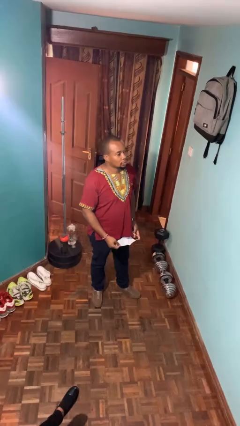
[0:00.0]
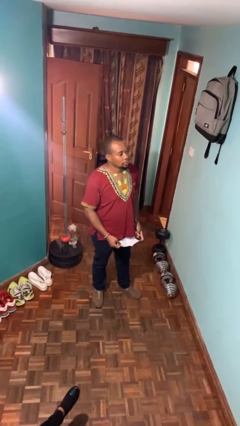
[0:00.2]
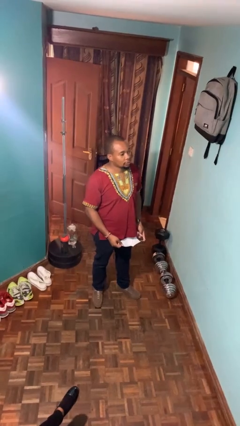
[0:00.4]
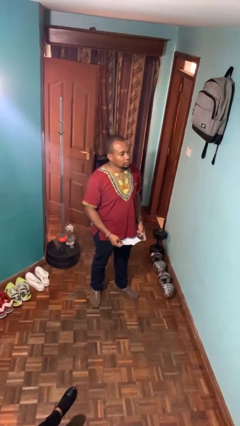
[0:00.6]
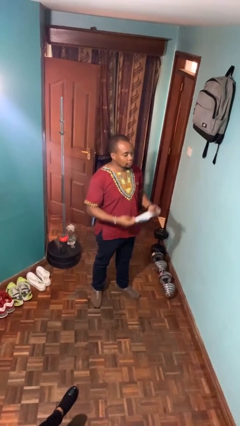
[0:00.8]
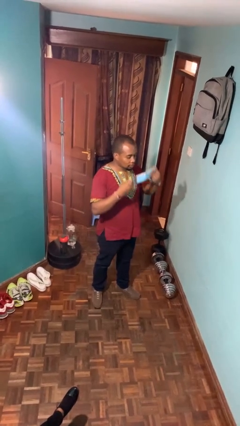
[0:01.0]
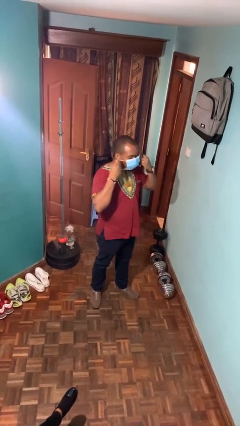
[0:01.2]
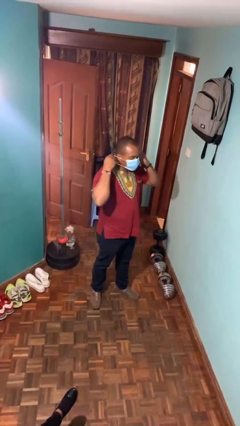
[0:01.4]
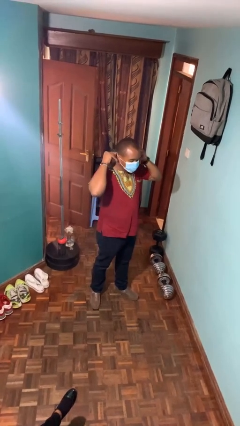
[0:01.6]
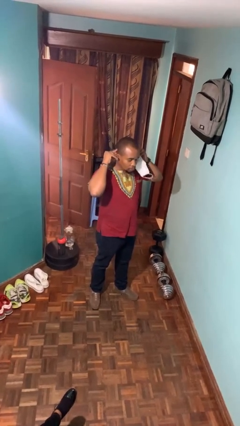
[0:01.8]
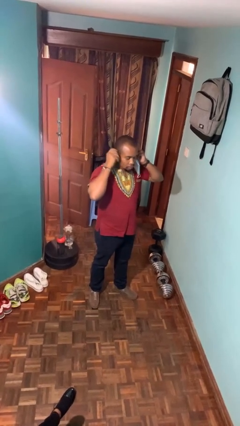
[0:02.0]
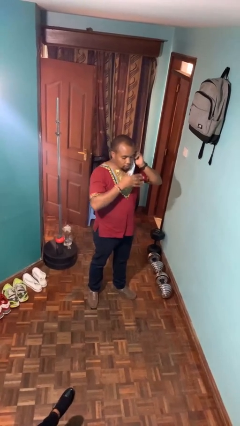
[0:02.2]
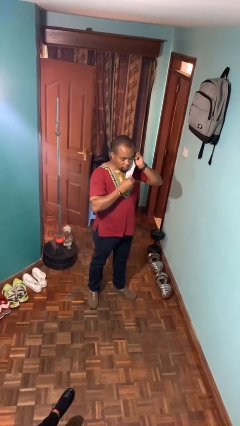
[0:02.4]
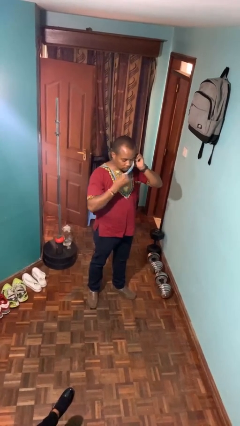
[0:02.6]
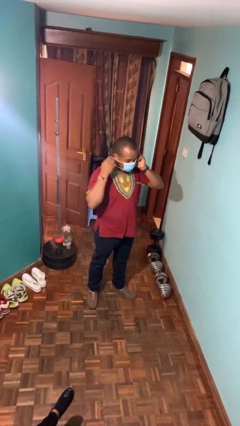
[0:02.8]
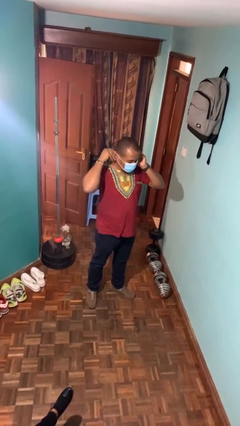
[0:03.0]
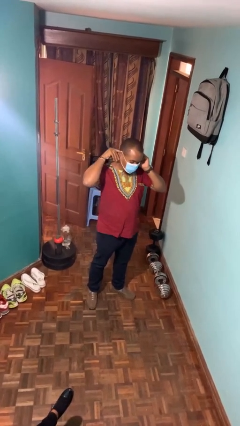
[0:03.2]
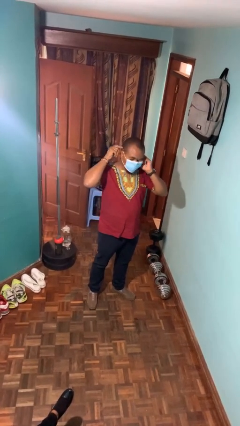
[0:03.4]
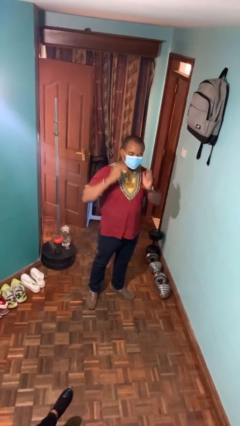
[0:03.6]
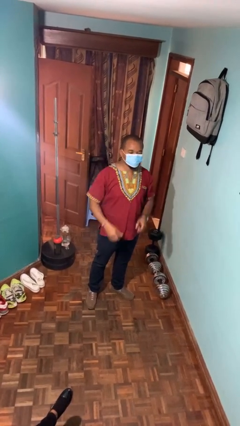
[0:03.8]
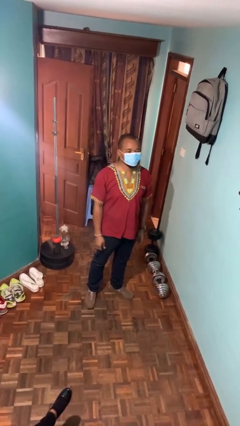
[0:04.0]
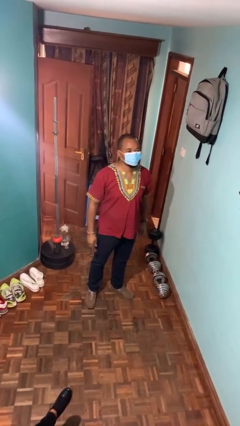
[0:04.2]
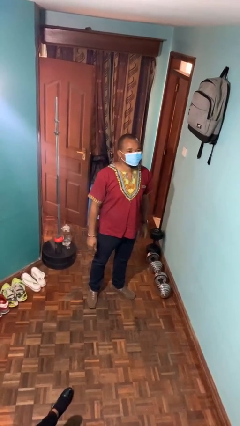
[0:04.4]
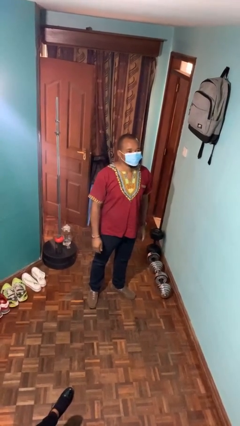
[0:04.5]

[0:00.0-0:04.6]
person puts on facemask

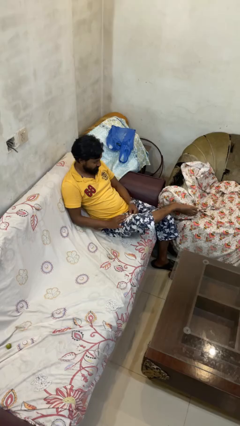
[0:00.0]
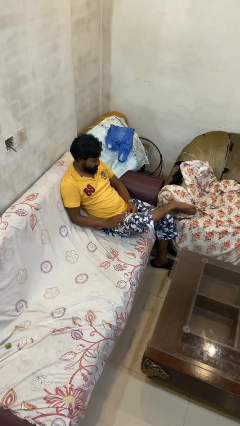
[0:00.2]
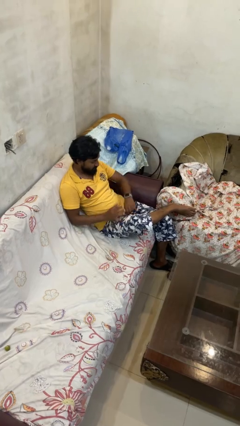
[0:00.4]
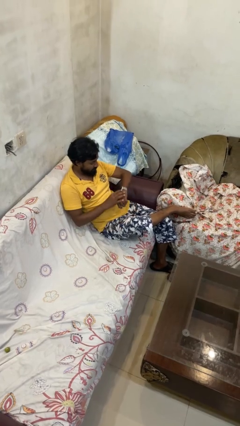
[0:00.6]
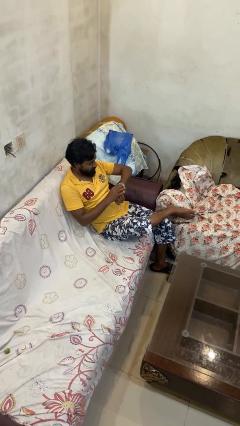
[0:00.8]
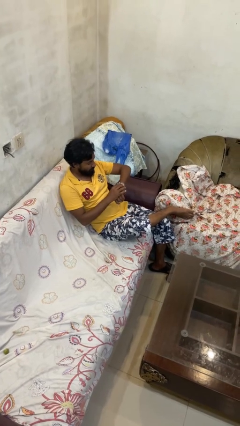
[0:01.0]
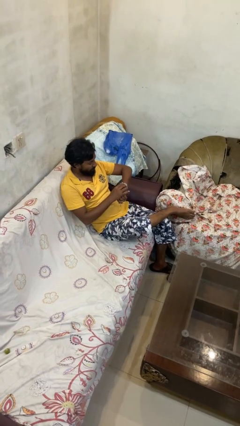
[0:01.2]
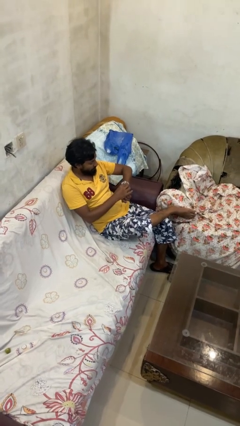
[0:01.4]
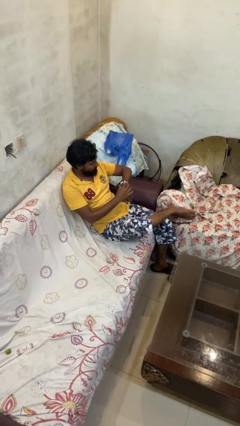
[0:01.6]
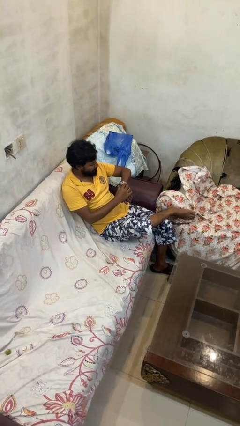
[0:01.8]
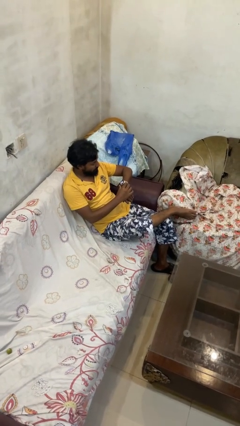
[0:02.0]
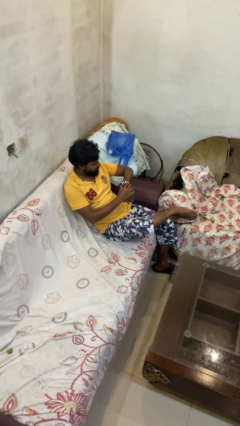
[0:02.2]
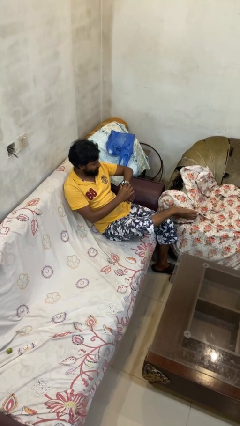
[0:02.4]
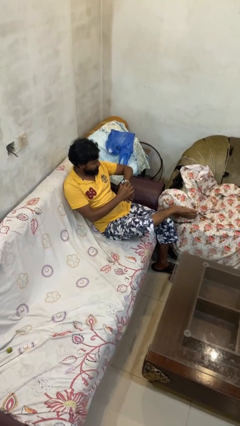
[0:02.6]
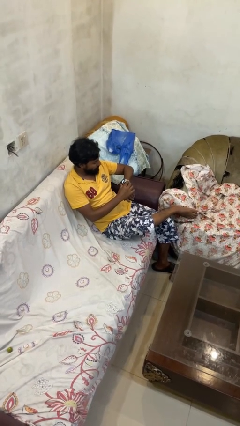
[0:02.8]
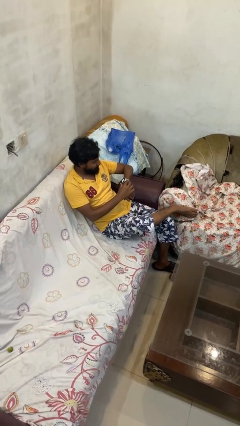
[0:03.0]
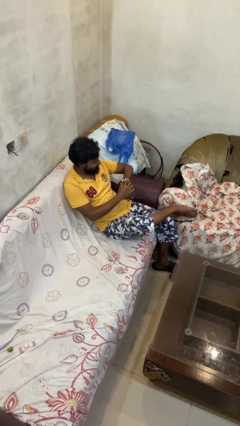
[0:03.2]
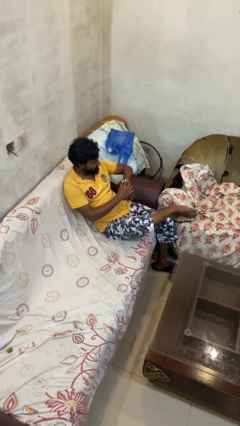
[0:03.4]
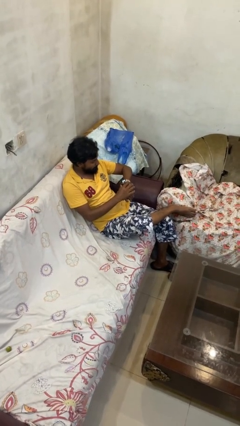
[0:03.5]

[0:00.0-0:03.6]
person looks at wristwatch

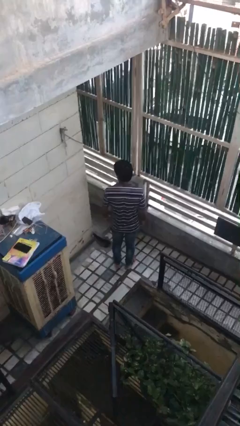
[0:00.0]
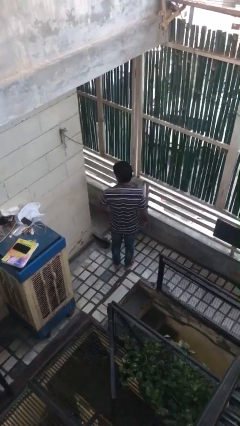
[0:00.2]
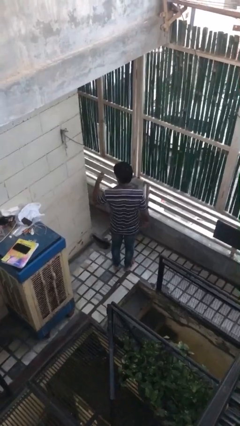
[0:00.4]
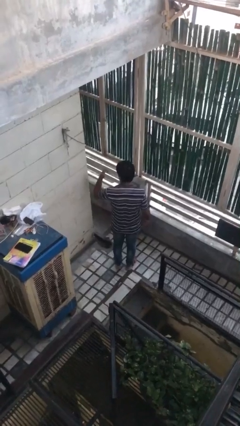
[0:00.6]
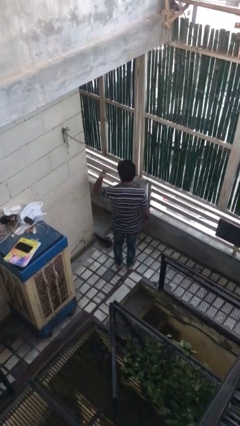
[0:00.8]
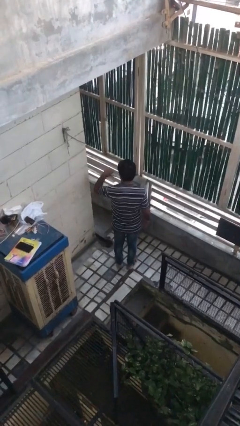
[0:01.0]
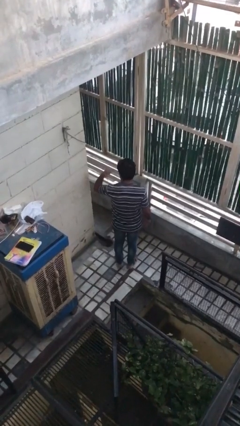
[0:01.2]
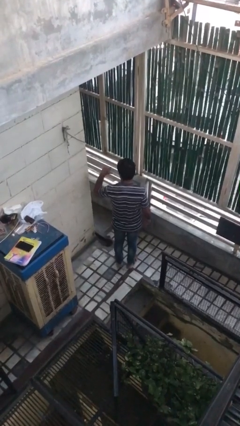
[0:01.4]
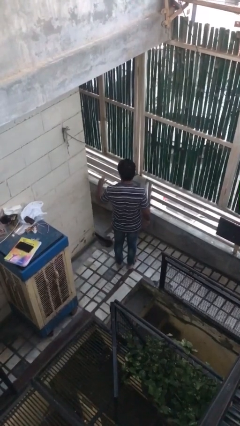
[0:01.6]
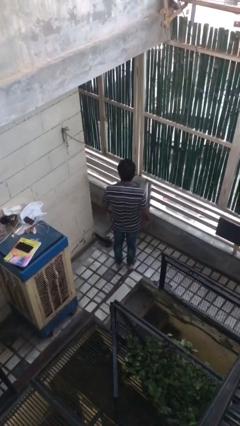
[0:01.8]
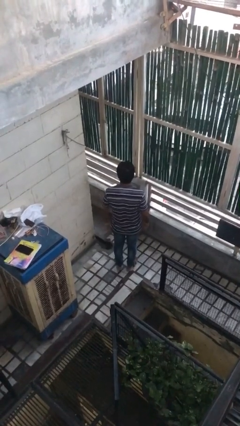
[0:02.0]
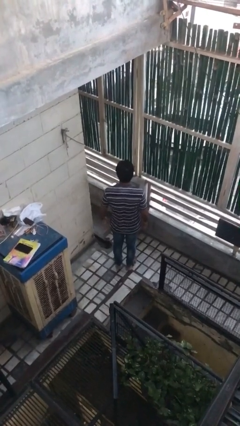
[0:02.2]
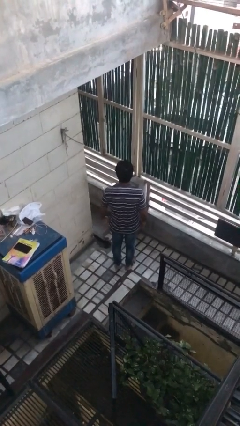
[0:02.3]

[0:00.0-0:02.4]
person gestures behind me

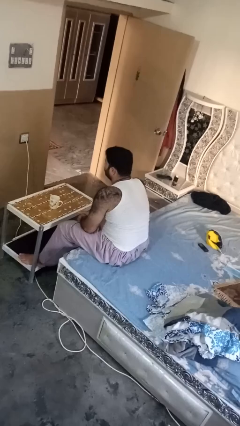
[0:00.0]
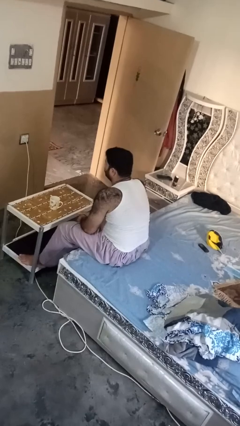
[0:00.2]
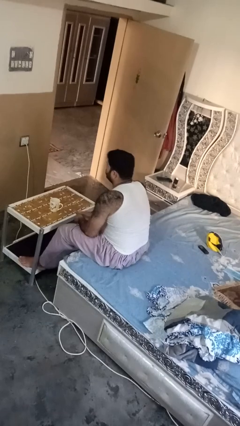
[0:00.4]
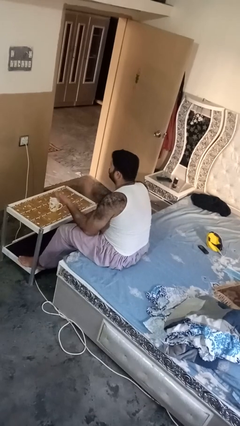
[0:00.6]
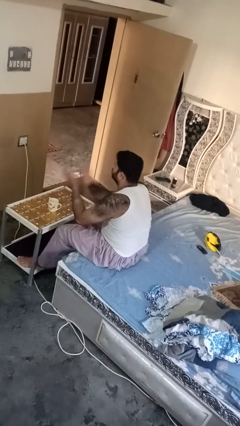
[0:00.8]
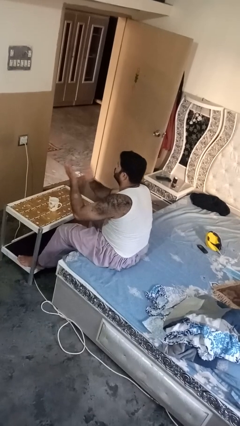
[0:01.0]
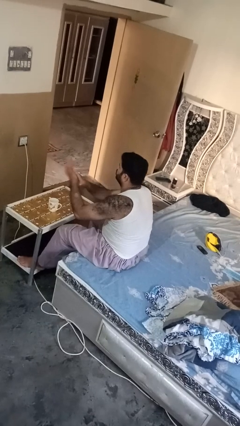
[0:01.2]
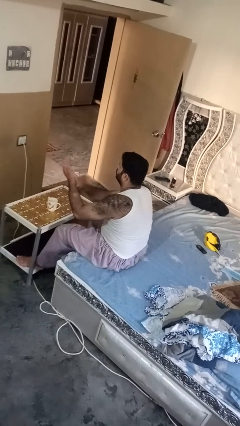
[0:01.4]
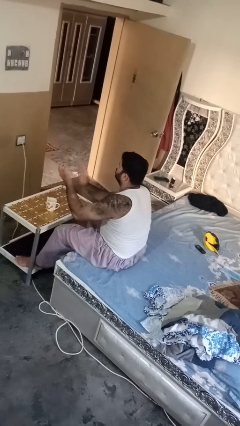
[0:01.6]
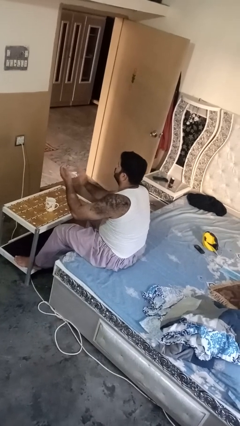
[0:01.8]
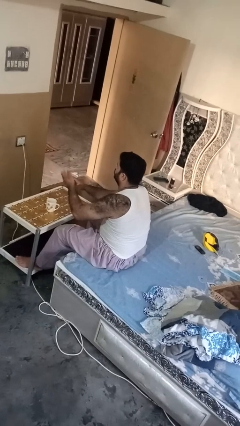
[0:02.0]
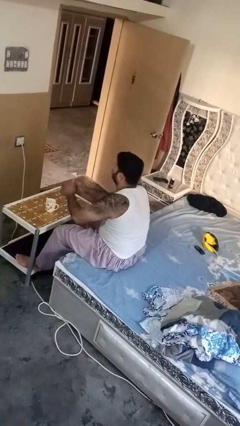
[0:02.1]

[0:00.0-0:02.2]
person claps hands

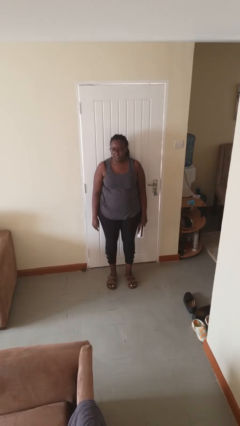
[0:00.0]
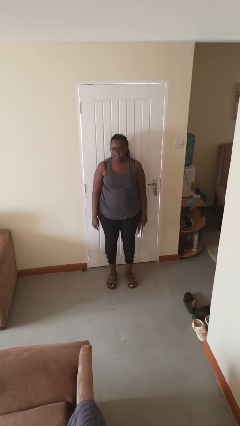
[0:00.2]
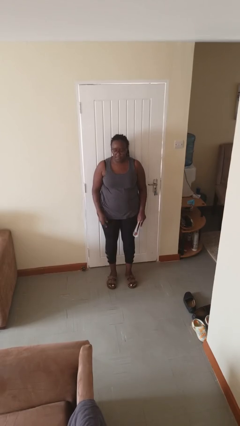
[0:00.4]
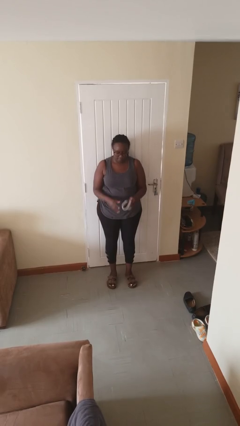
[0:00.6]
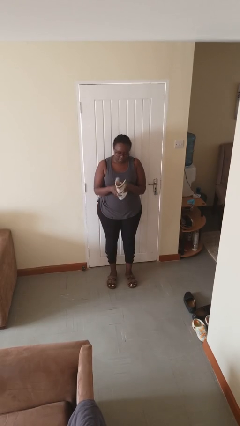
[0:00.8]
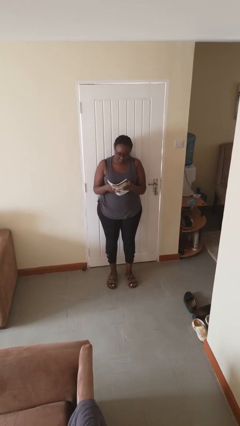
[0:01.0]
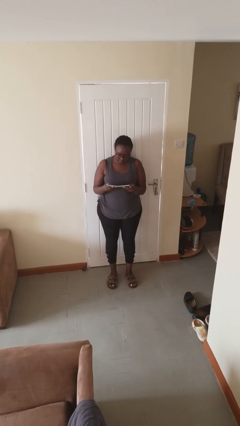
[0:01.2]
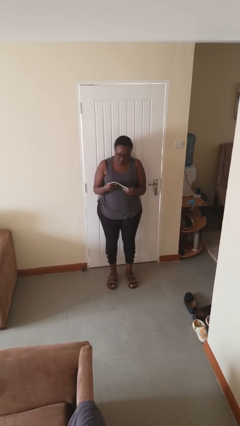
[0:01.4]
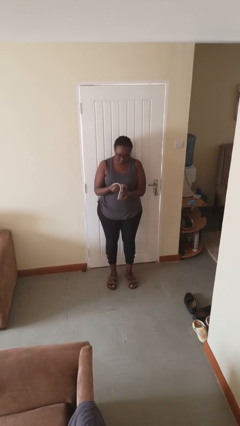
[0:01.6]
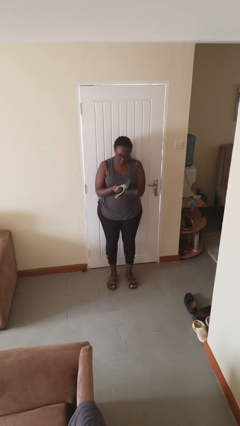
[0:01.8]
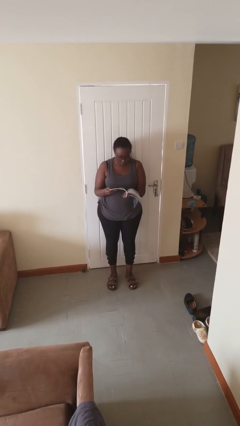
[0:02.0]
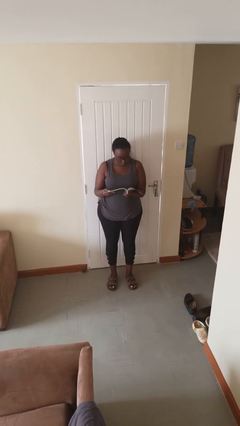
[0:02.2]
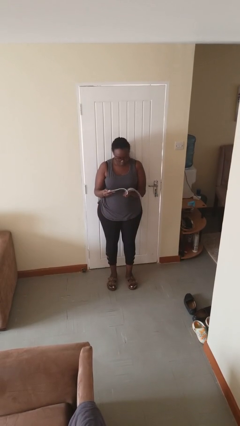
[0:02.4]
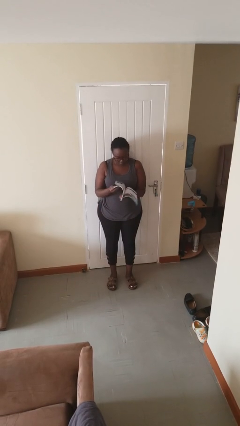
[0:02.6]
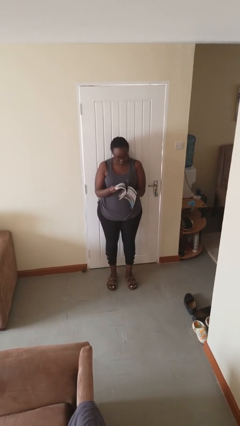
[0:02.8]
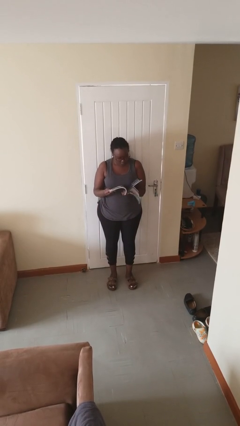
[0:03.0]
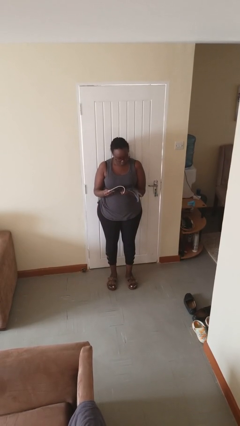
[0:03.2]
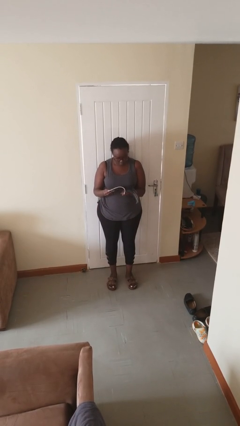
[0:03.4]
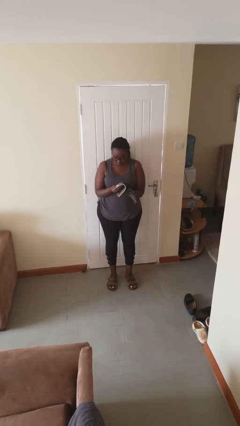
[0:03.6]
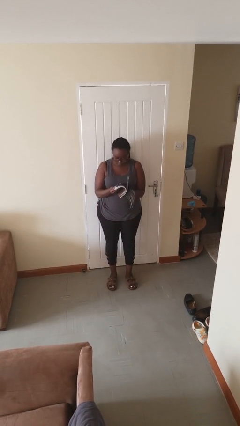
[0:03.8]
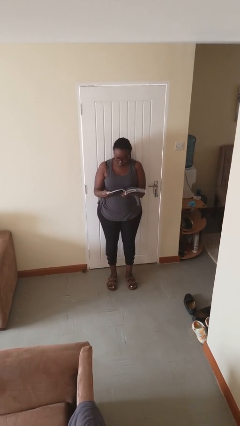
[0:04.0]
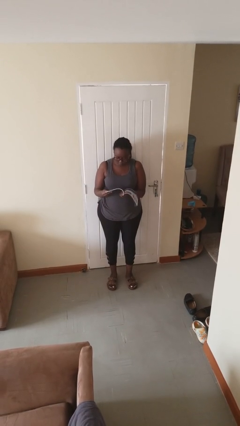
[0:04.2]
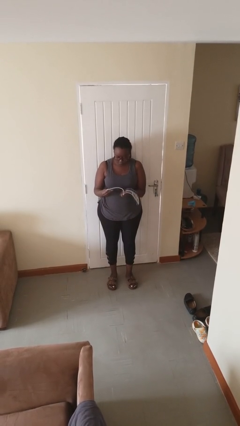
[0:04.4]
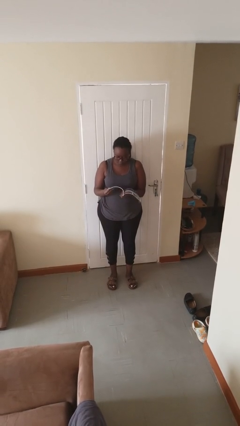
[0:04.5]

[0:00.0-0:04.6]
person reads magazine

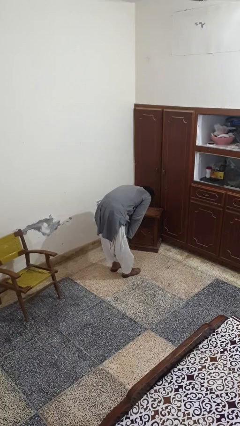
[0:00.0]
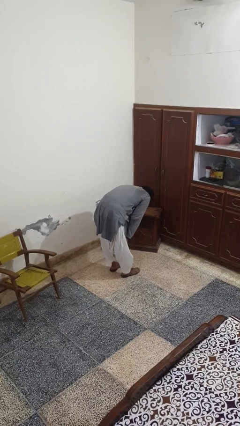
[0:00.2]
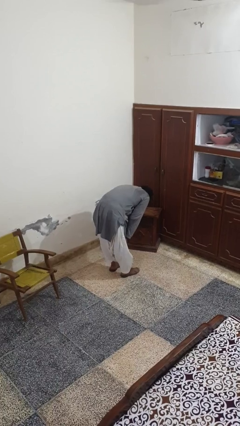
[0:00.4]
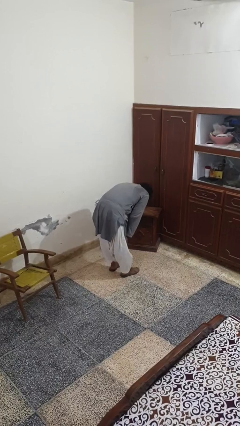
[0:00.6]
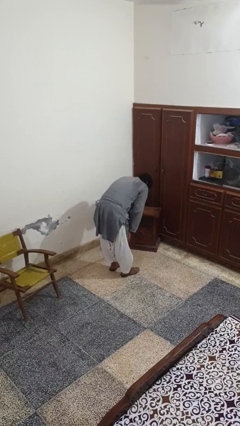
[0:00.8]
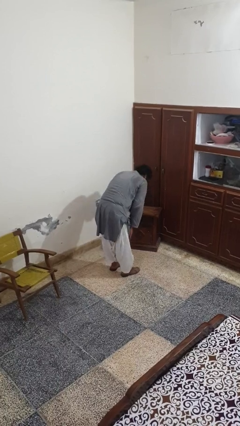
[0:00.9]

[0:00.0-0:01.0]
person prays
